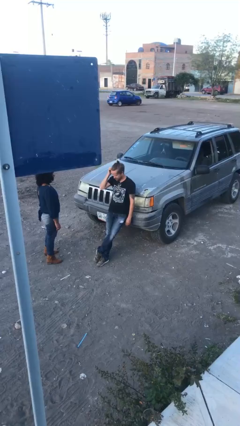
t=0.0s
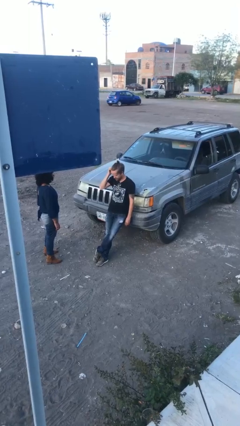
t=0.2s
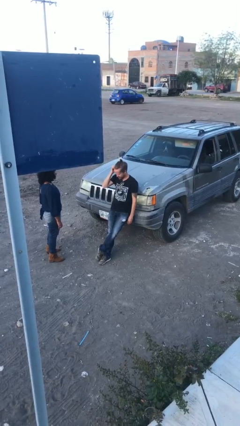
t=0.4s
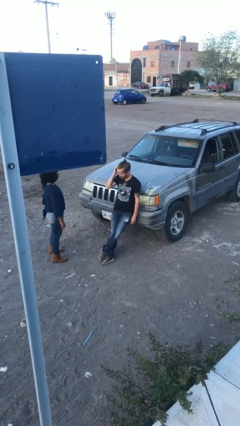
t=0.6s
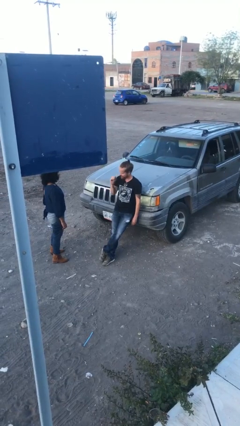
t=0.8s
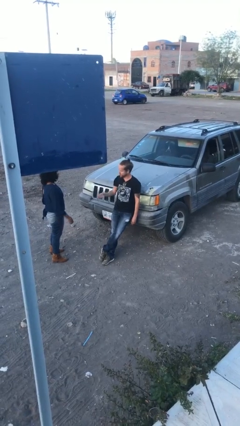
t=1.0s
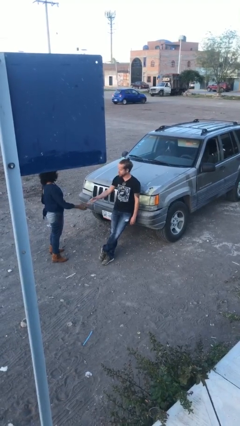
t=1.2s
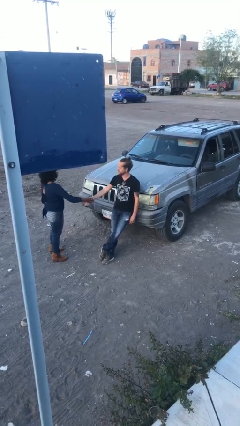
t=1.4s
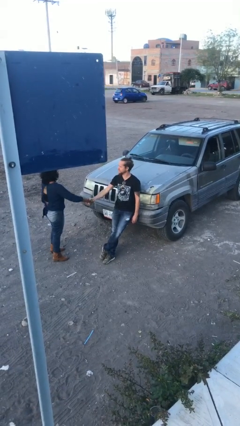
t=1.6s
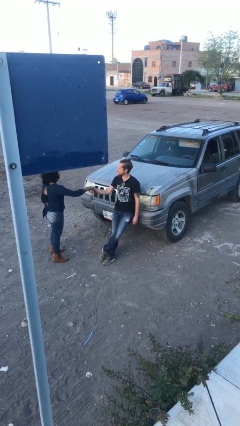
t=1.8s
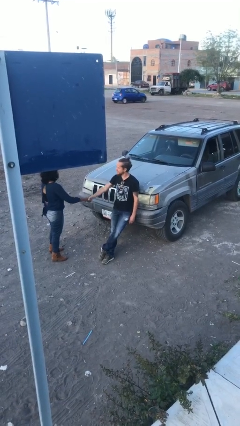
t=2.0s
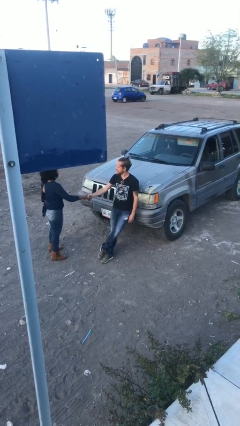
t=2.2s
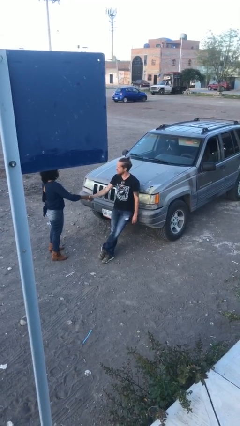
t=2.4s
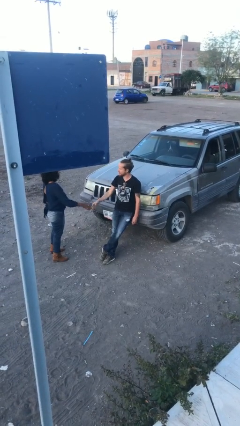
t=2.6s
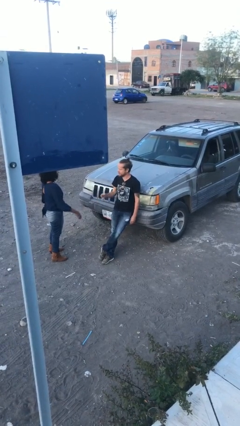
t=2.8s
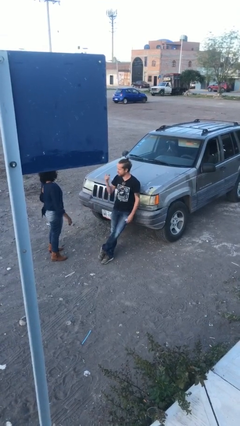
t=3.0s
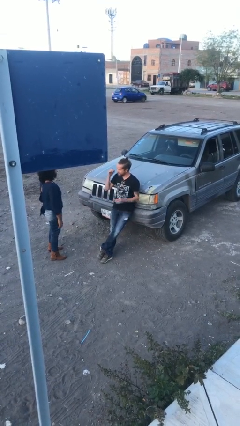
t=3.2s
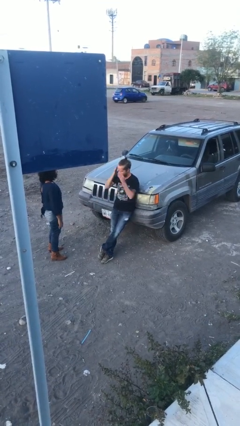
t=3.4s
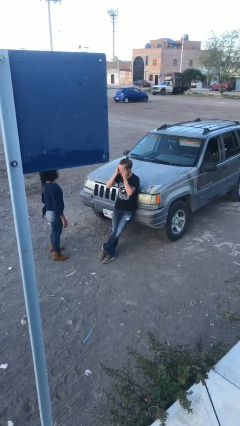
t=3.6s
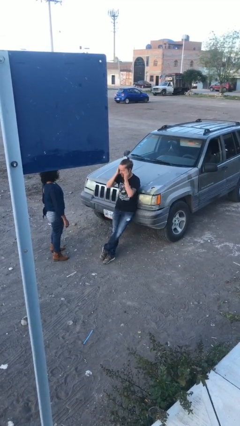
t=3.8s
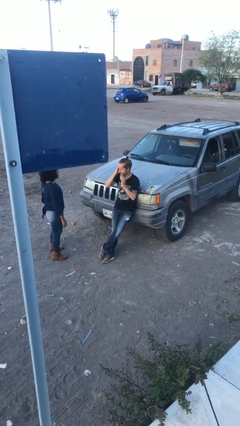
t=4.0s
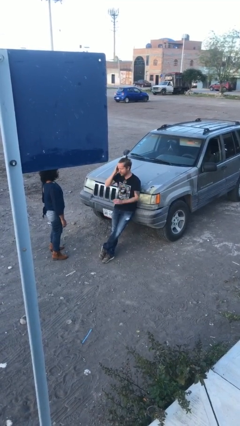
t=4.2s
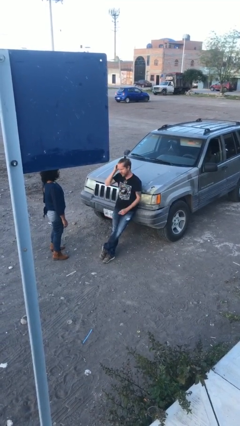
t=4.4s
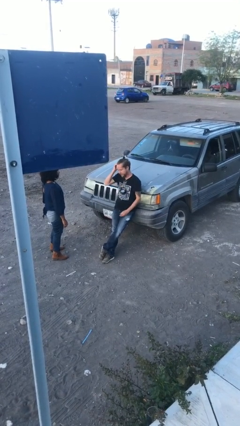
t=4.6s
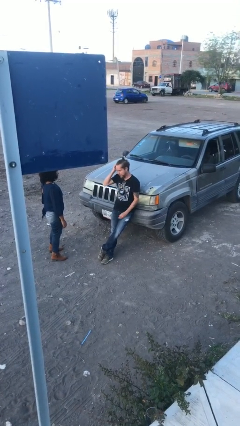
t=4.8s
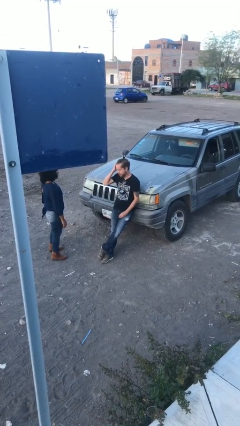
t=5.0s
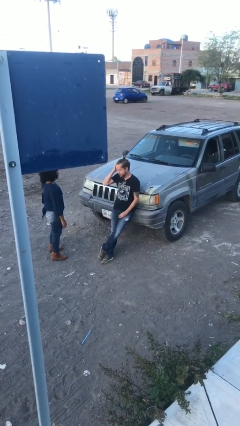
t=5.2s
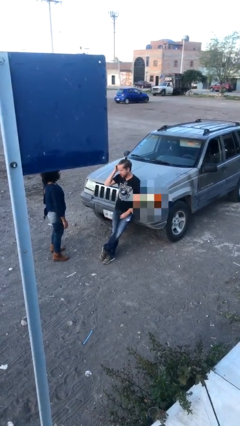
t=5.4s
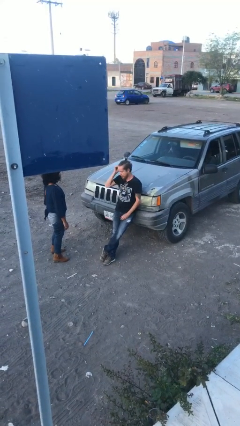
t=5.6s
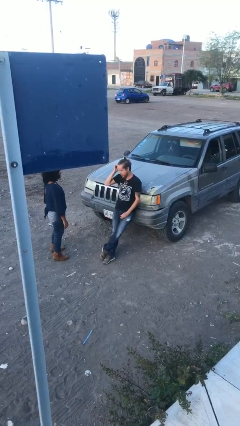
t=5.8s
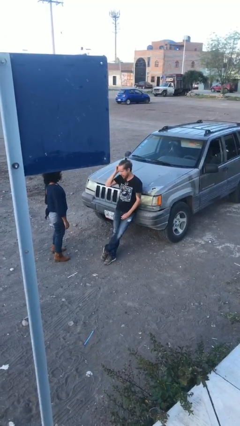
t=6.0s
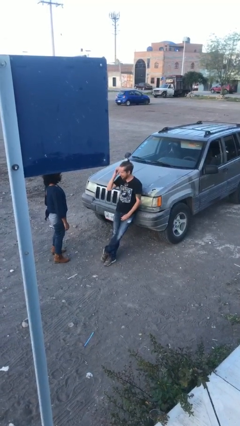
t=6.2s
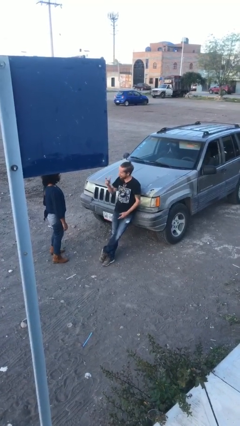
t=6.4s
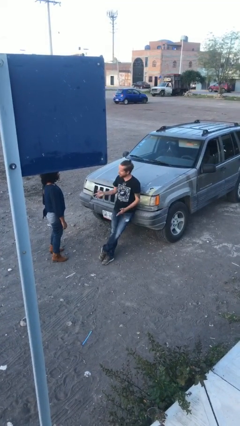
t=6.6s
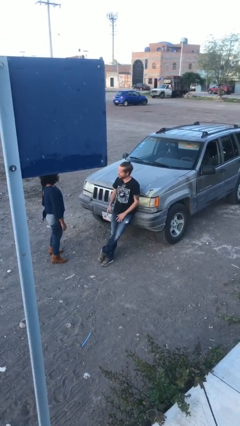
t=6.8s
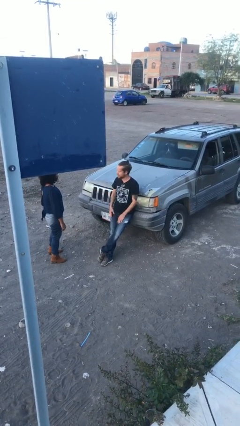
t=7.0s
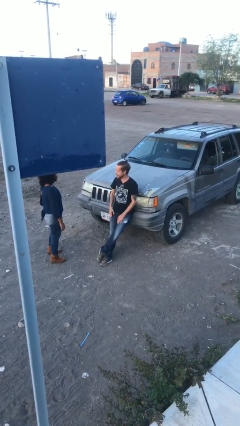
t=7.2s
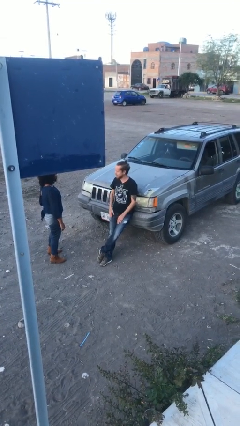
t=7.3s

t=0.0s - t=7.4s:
person shakes hand

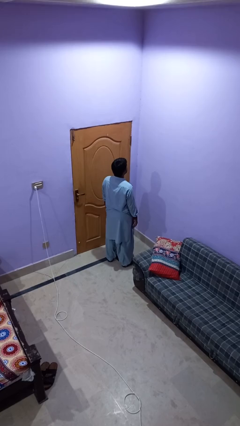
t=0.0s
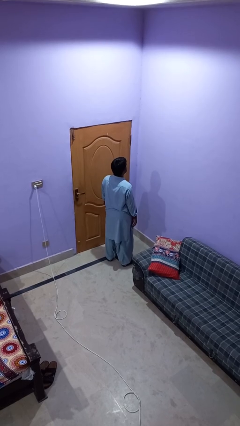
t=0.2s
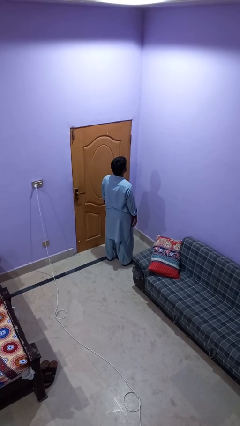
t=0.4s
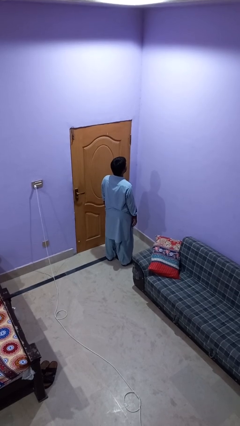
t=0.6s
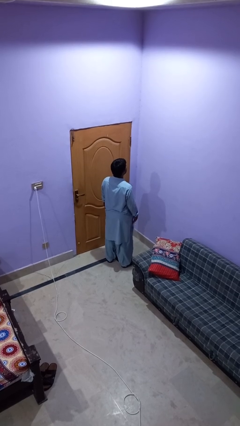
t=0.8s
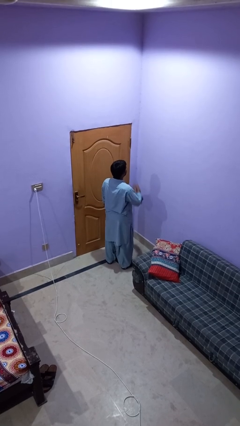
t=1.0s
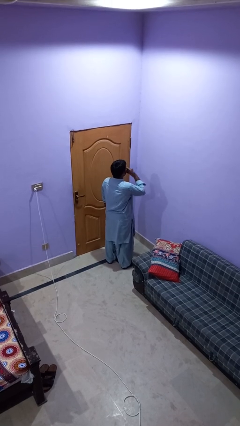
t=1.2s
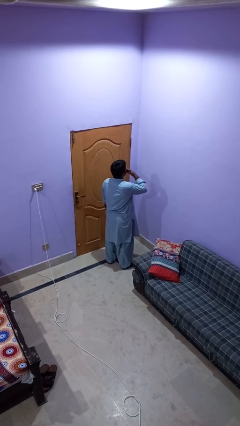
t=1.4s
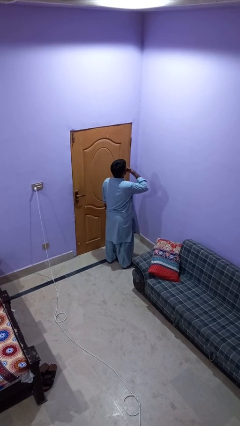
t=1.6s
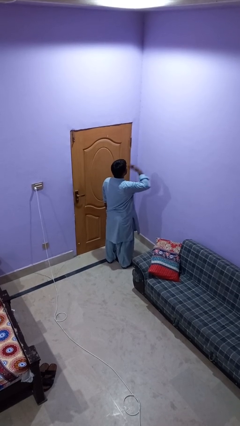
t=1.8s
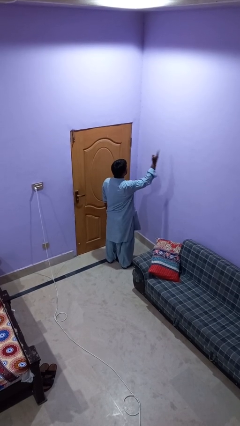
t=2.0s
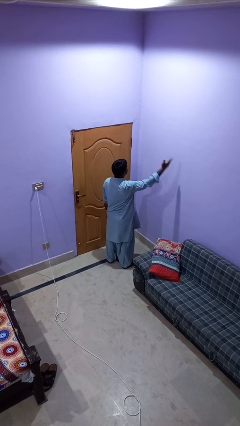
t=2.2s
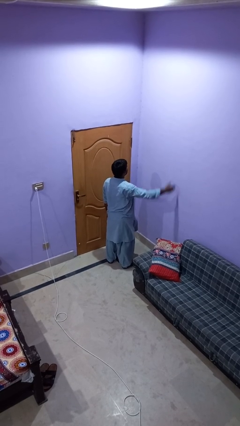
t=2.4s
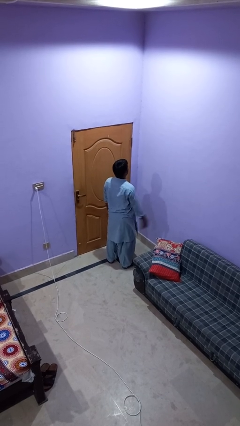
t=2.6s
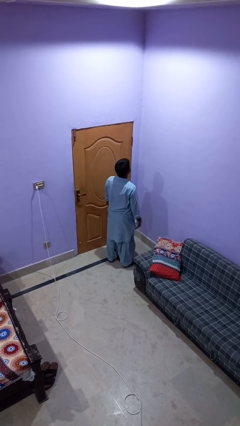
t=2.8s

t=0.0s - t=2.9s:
person gestures blow kiss

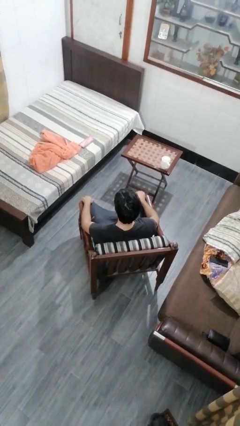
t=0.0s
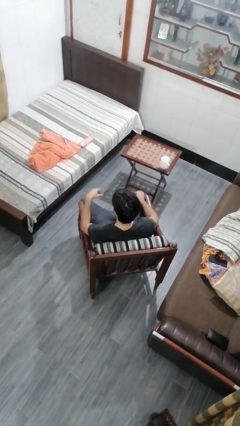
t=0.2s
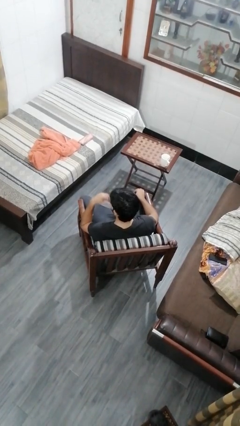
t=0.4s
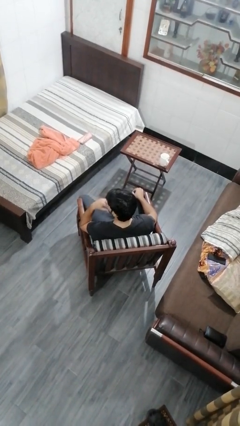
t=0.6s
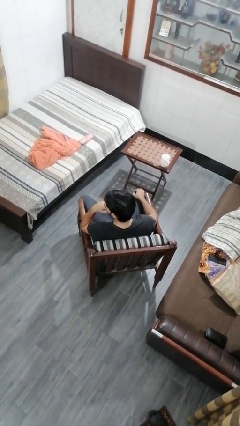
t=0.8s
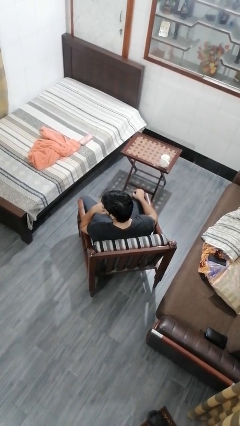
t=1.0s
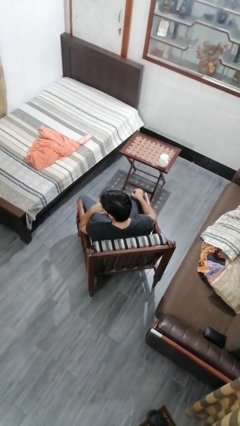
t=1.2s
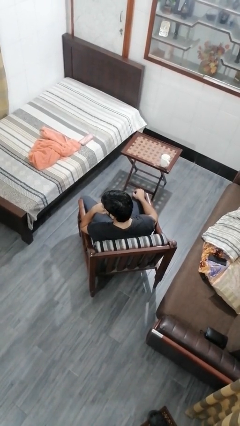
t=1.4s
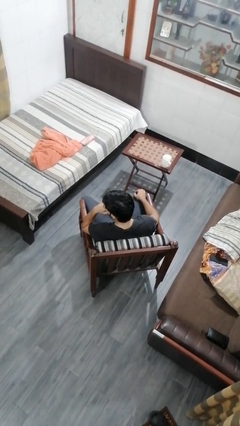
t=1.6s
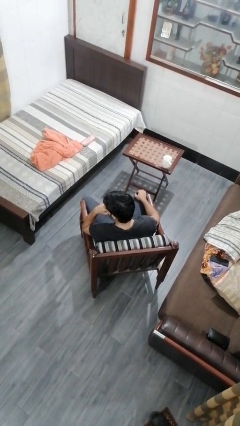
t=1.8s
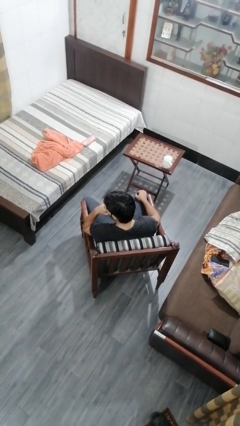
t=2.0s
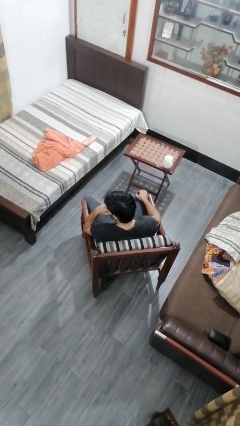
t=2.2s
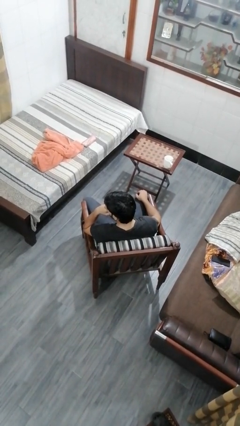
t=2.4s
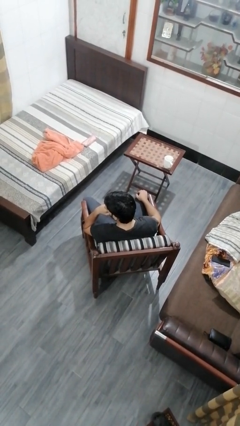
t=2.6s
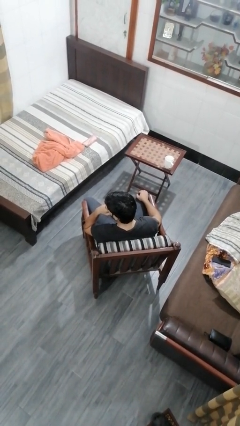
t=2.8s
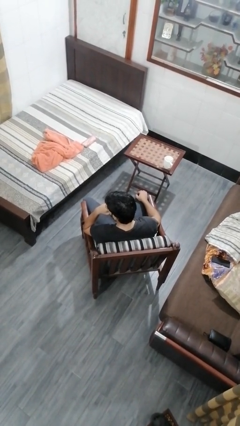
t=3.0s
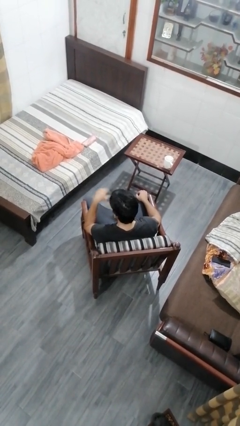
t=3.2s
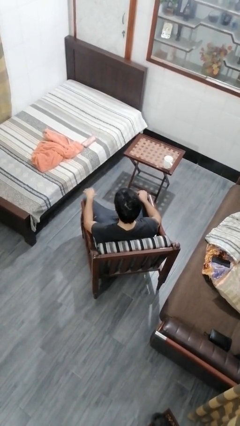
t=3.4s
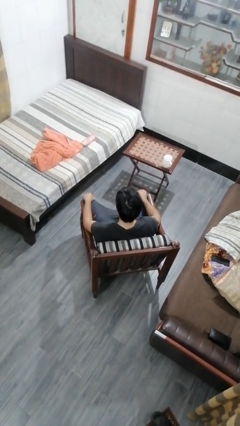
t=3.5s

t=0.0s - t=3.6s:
person strokes chin

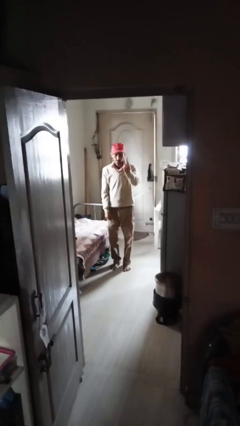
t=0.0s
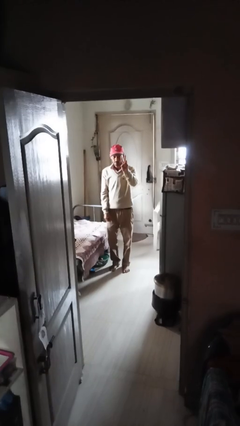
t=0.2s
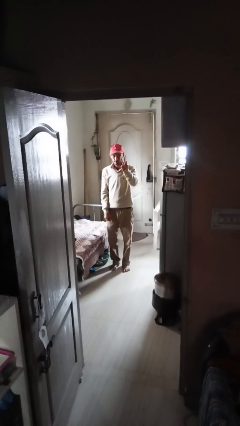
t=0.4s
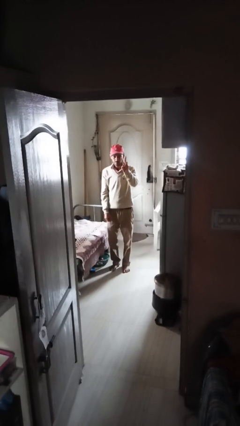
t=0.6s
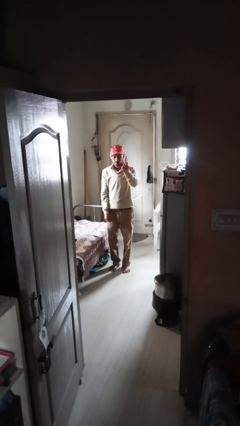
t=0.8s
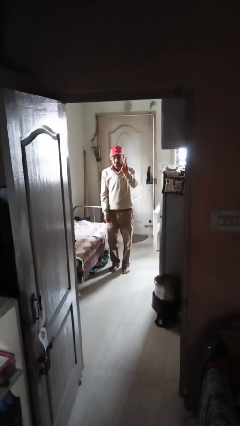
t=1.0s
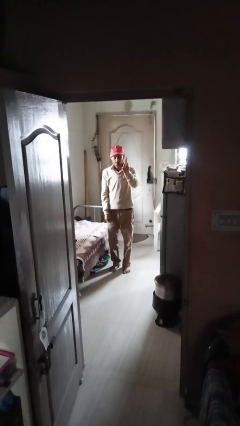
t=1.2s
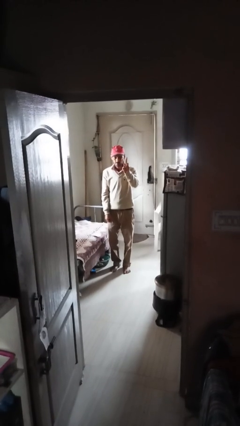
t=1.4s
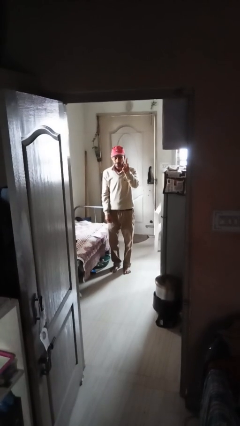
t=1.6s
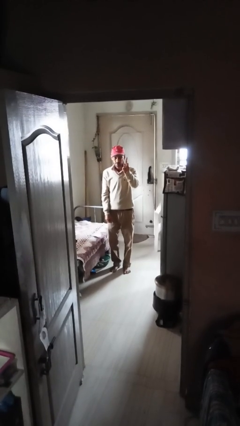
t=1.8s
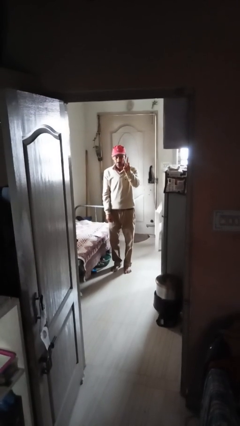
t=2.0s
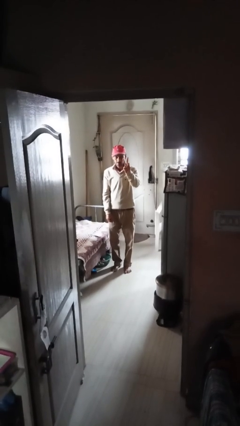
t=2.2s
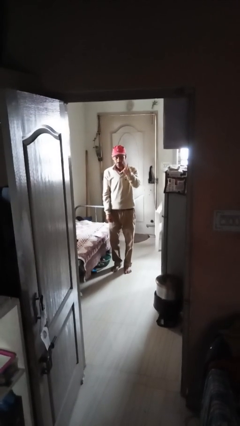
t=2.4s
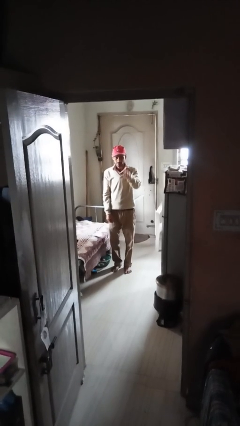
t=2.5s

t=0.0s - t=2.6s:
person gestures peace

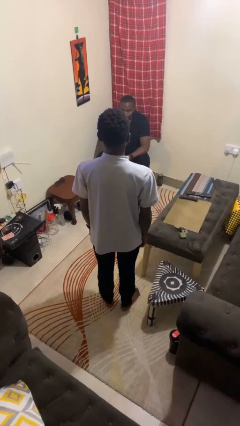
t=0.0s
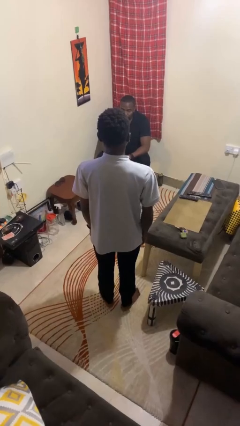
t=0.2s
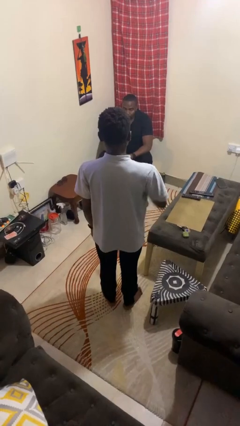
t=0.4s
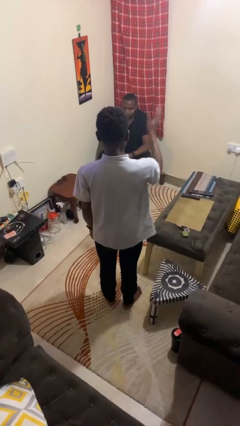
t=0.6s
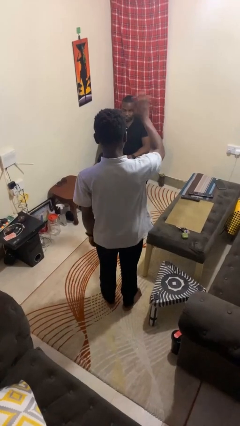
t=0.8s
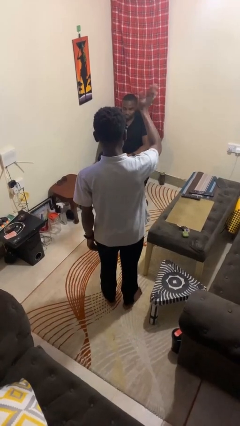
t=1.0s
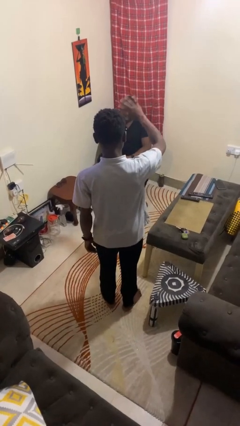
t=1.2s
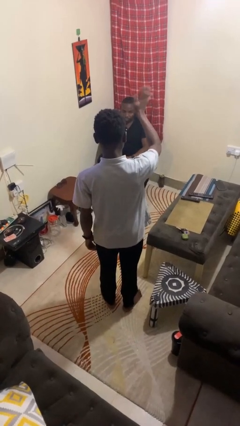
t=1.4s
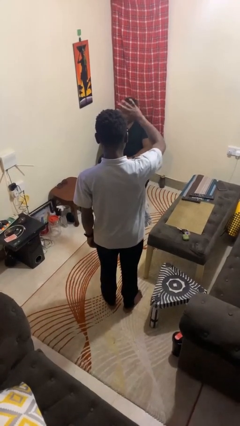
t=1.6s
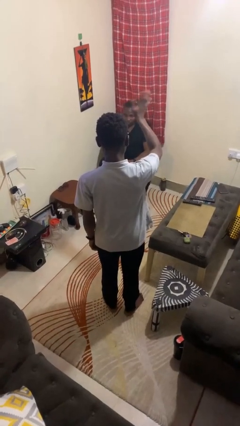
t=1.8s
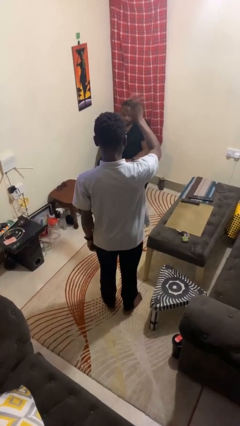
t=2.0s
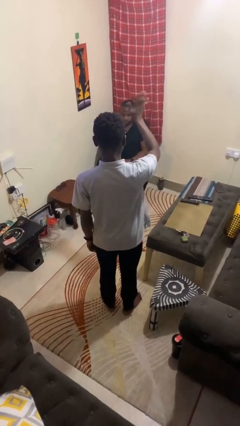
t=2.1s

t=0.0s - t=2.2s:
person waves at person
